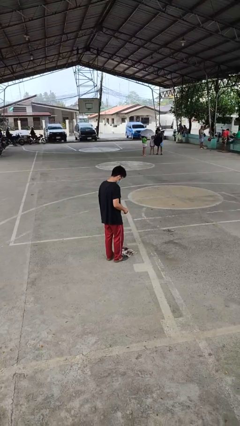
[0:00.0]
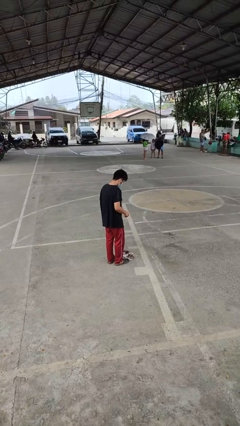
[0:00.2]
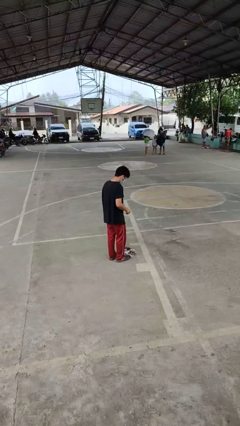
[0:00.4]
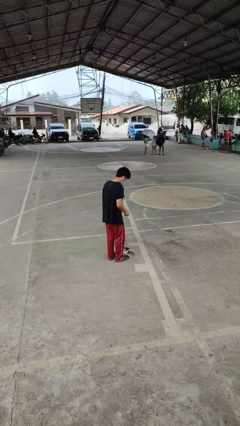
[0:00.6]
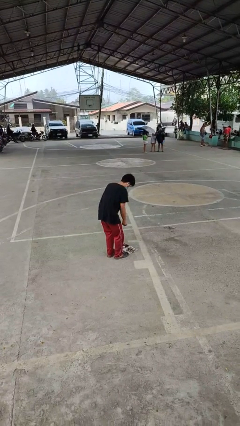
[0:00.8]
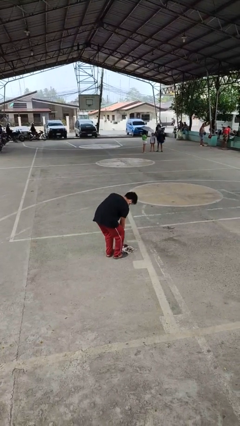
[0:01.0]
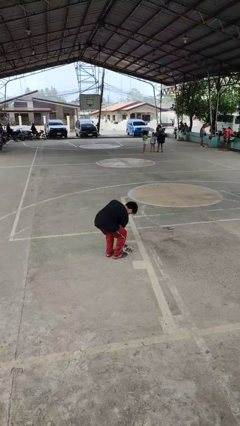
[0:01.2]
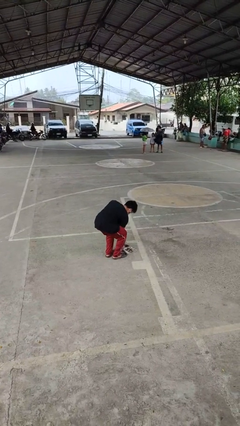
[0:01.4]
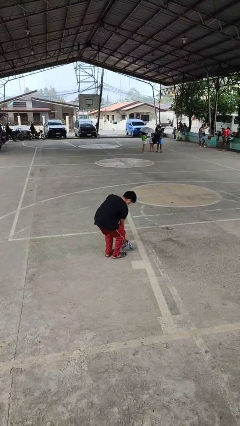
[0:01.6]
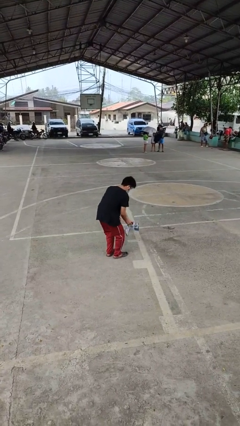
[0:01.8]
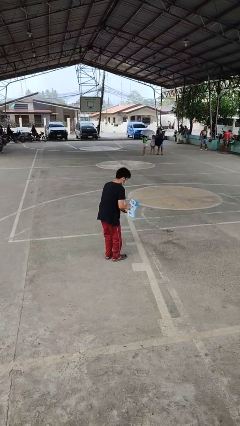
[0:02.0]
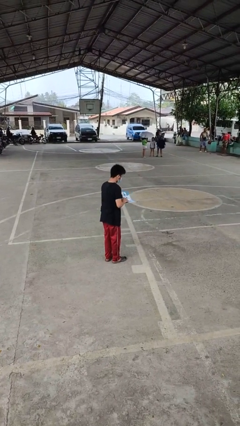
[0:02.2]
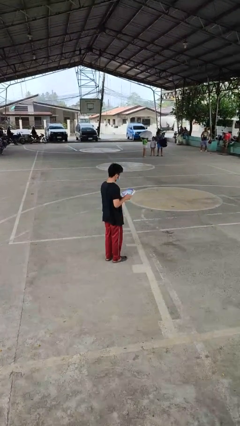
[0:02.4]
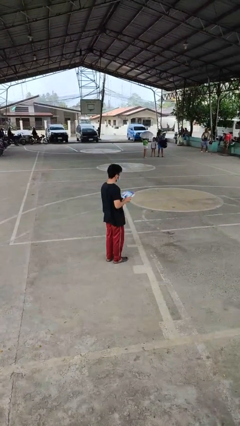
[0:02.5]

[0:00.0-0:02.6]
person picks up object from floor

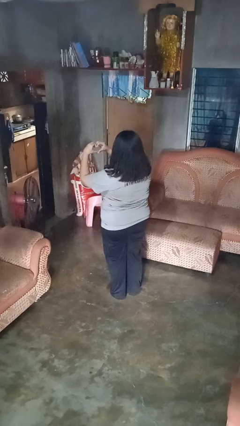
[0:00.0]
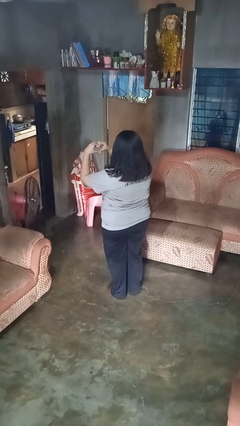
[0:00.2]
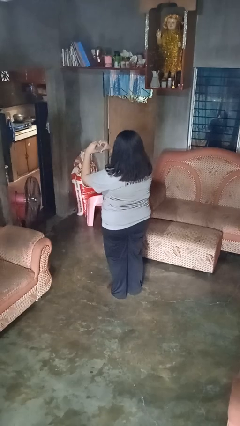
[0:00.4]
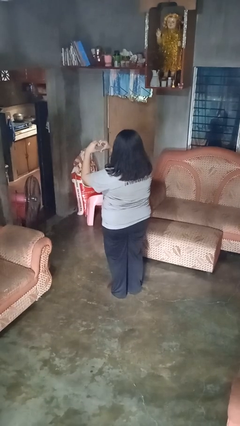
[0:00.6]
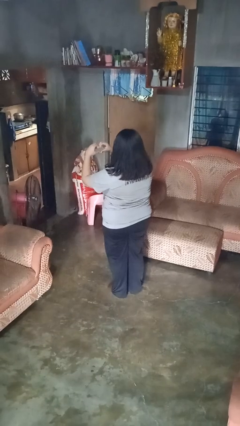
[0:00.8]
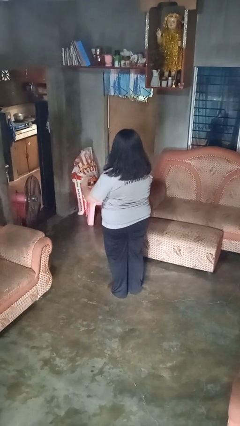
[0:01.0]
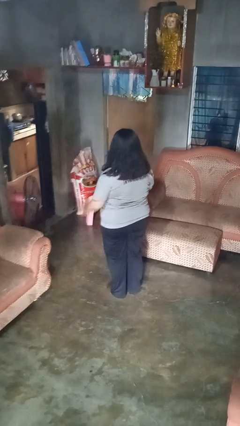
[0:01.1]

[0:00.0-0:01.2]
person gestures heart

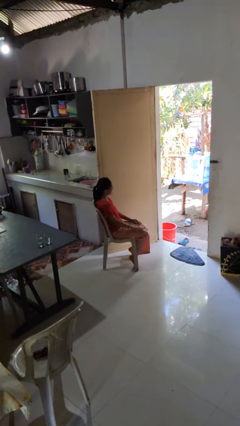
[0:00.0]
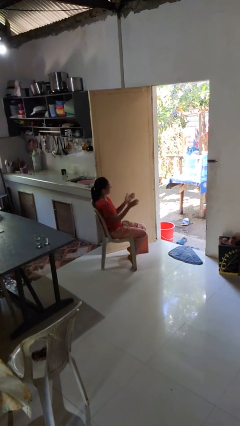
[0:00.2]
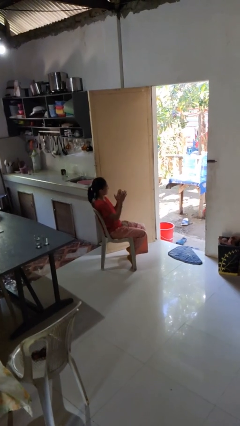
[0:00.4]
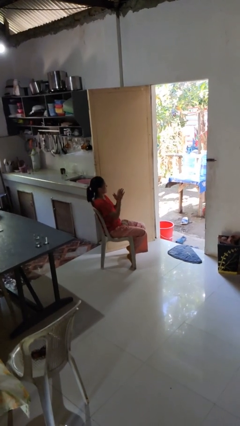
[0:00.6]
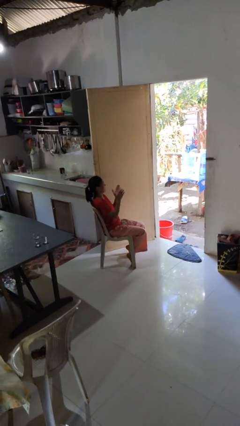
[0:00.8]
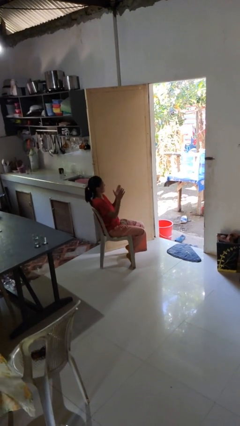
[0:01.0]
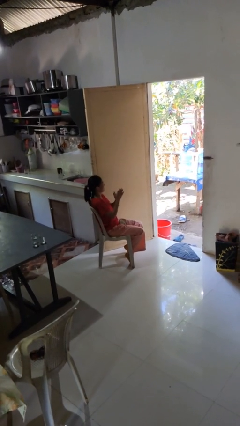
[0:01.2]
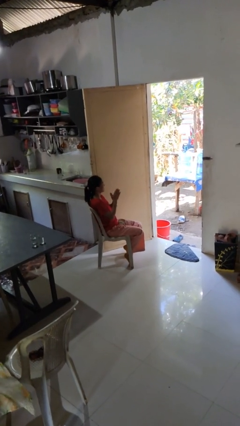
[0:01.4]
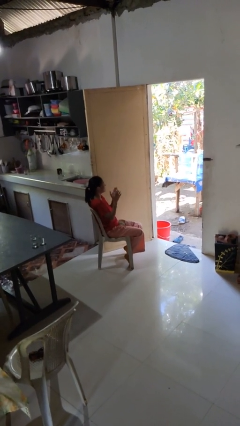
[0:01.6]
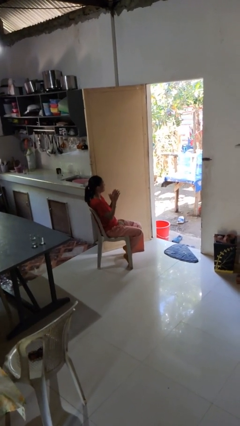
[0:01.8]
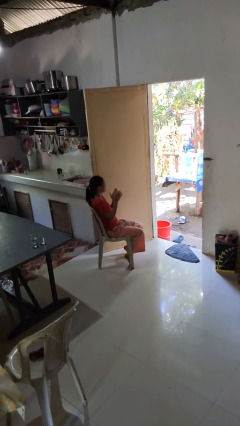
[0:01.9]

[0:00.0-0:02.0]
person claps hands

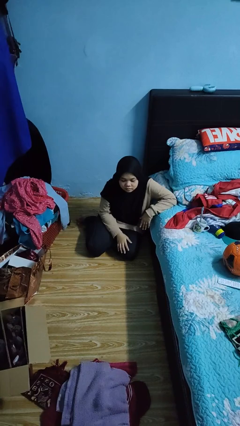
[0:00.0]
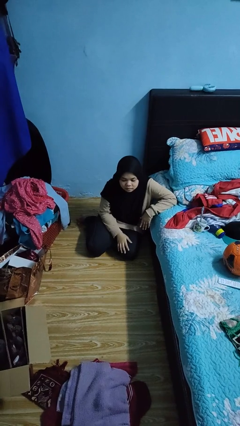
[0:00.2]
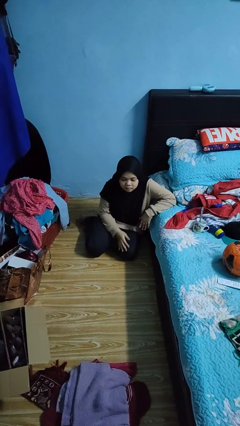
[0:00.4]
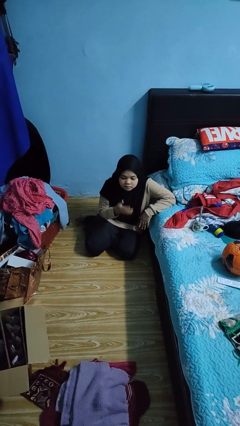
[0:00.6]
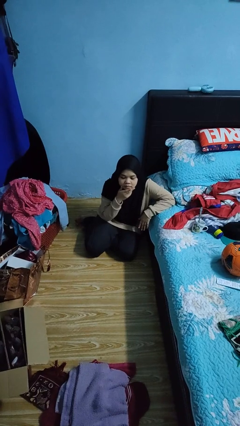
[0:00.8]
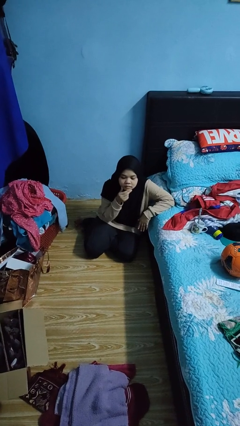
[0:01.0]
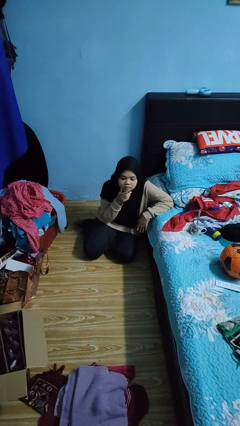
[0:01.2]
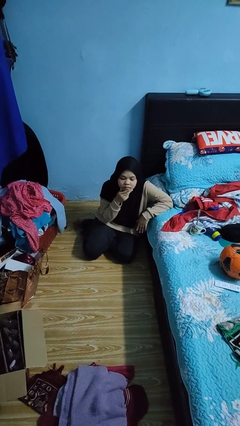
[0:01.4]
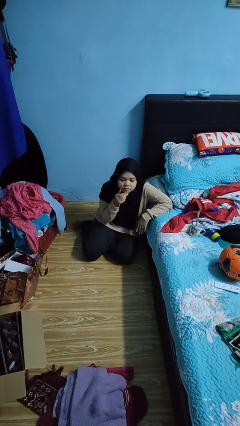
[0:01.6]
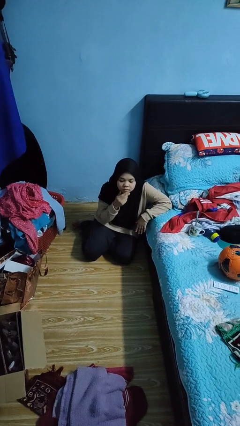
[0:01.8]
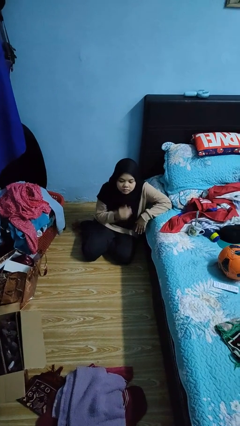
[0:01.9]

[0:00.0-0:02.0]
person strokes chin

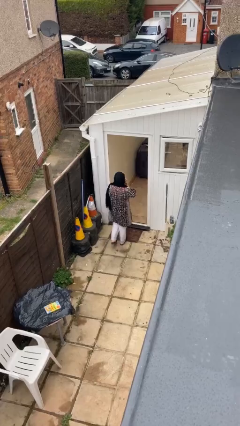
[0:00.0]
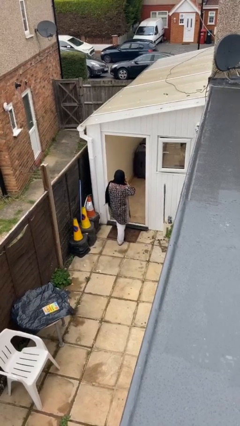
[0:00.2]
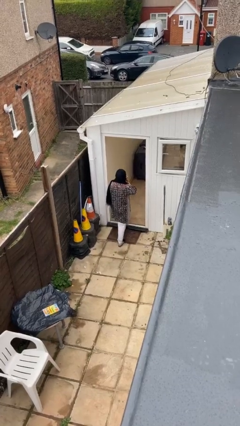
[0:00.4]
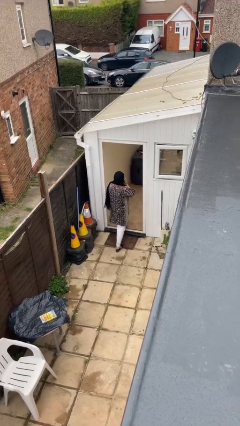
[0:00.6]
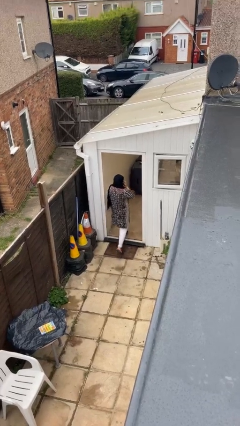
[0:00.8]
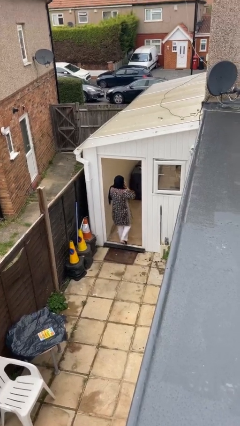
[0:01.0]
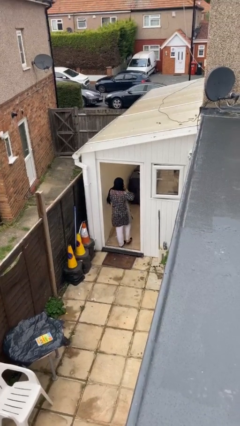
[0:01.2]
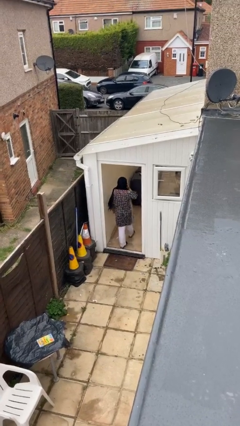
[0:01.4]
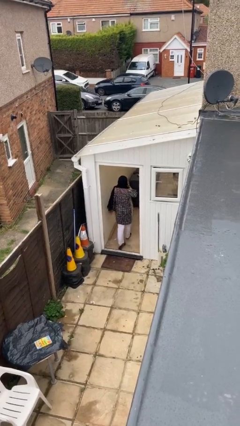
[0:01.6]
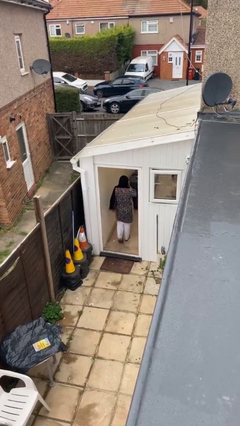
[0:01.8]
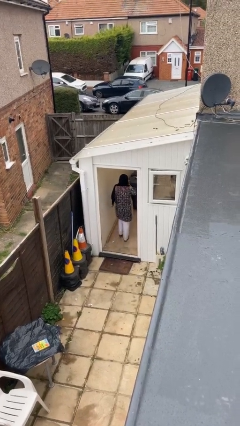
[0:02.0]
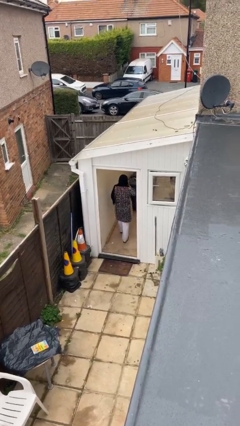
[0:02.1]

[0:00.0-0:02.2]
person exits scene through structure

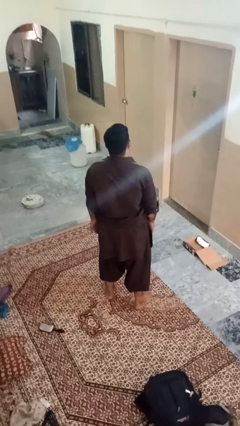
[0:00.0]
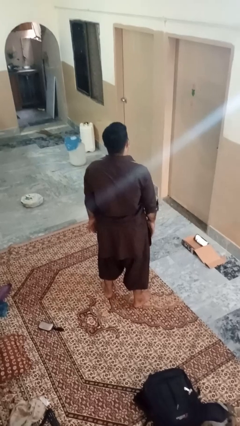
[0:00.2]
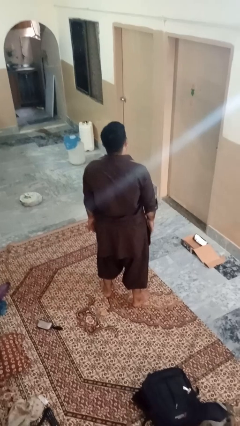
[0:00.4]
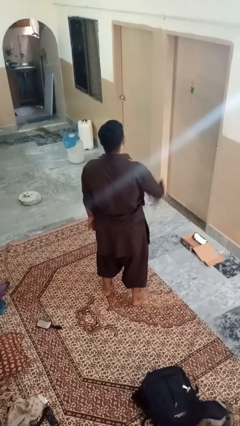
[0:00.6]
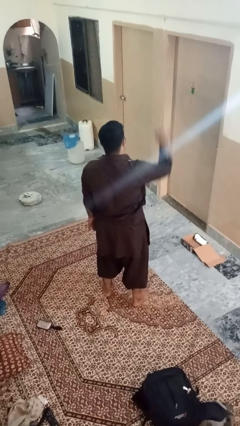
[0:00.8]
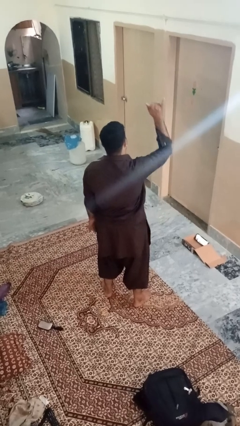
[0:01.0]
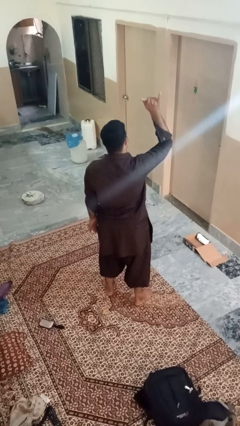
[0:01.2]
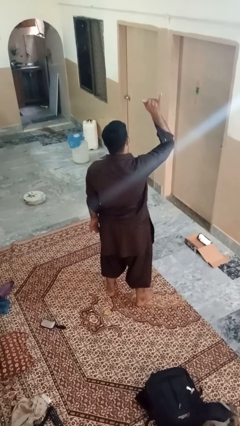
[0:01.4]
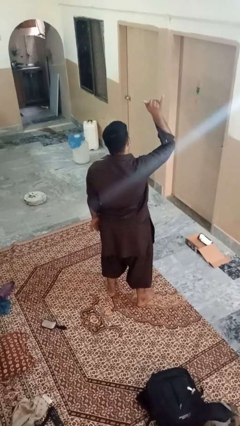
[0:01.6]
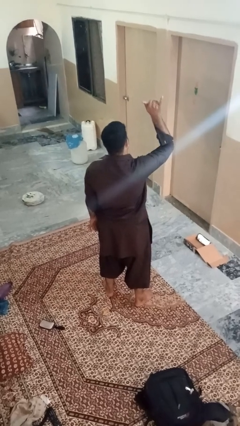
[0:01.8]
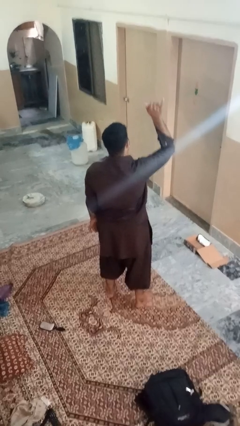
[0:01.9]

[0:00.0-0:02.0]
person gestures hang loose

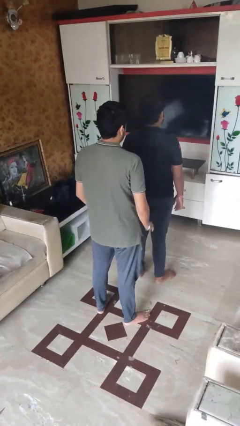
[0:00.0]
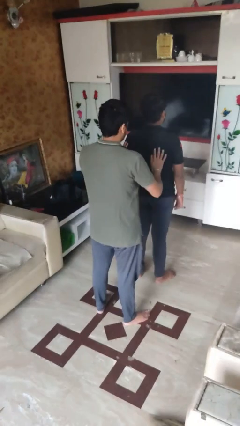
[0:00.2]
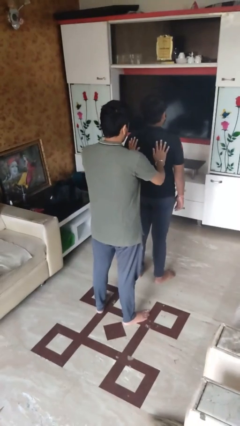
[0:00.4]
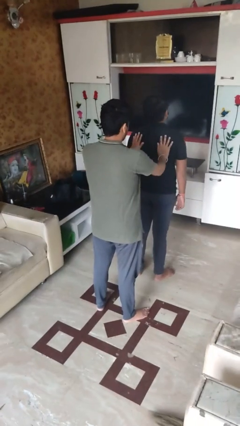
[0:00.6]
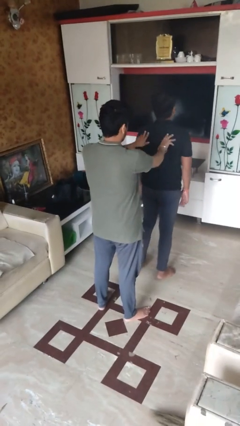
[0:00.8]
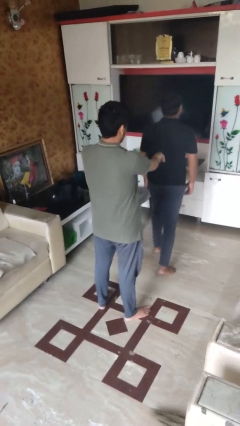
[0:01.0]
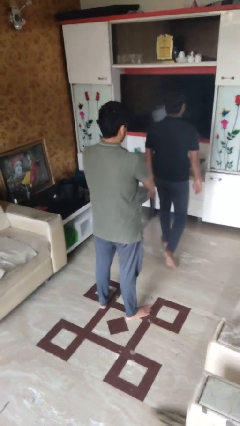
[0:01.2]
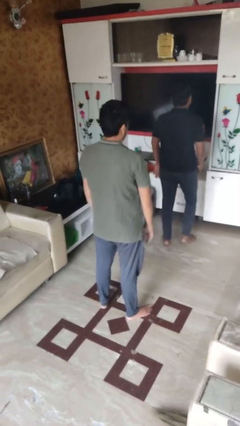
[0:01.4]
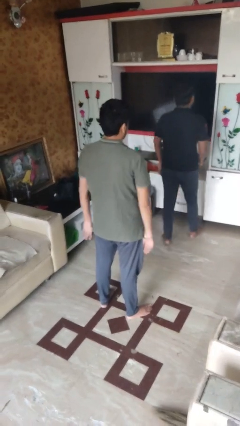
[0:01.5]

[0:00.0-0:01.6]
person shoves person

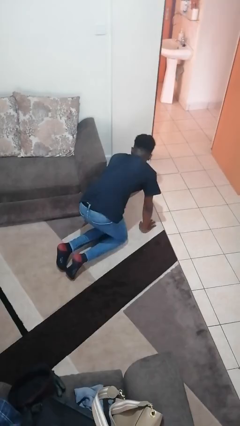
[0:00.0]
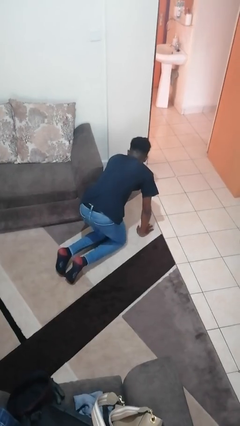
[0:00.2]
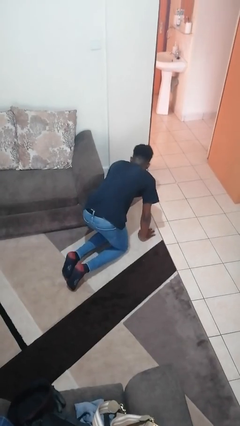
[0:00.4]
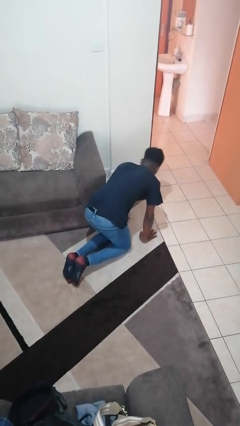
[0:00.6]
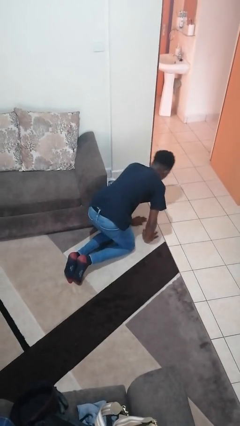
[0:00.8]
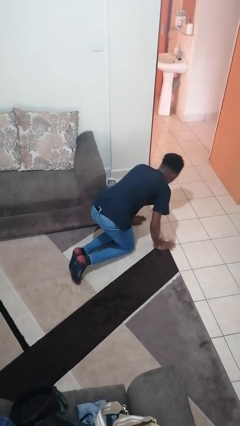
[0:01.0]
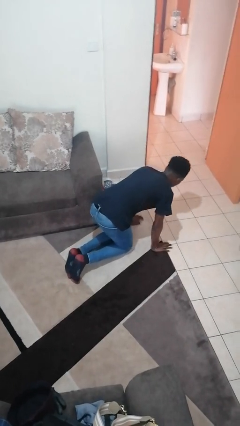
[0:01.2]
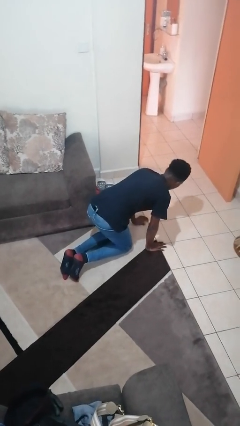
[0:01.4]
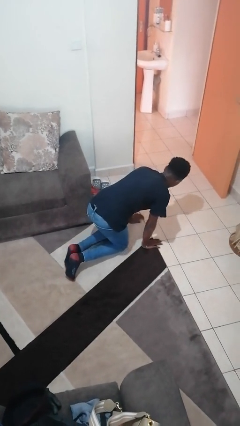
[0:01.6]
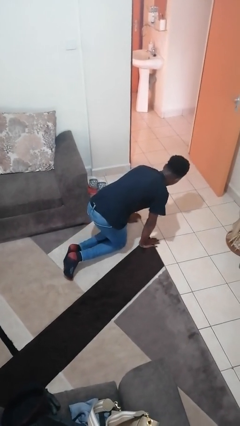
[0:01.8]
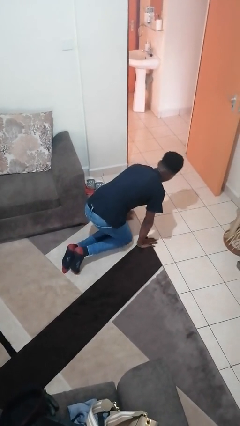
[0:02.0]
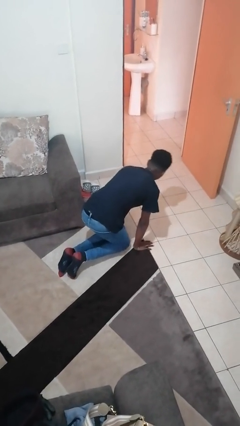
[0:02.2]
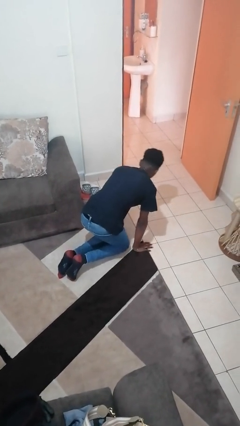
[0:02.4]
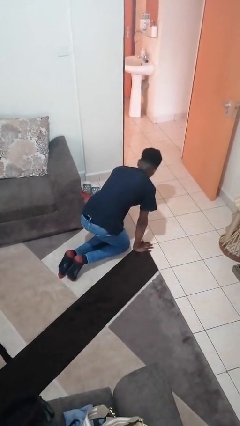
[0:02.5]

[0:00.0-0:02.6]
person crawls

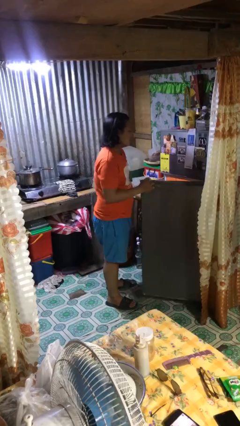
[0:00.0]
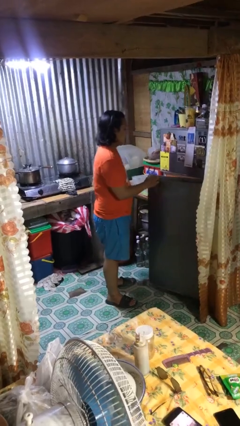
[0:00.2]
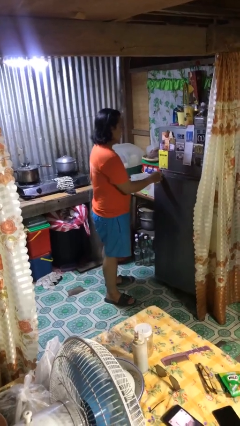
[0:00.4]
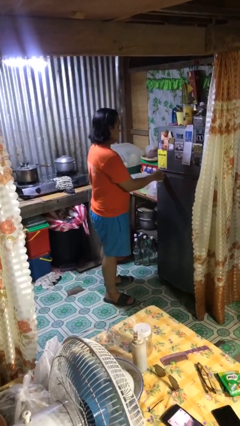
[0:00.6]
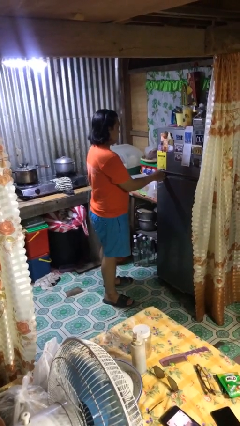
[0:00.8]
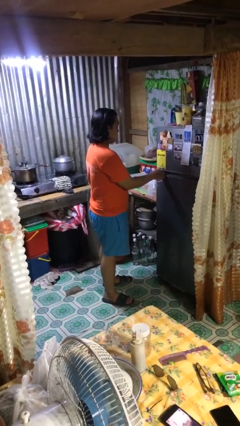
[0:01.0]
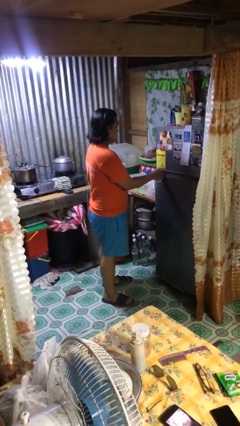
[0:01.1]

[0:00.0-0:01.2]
person closes refrigerator
